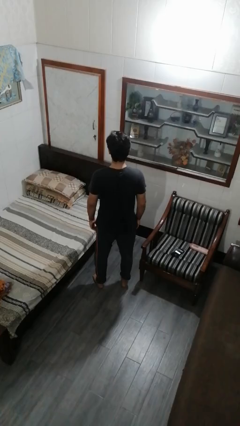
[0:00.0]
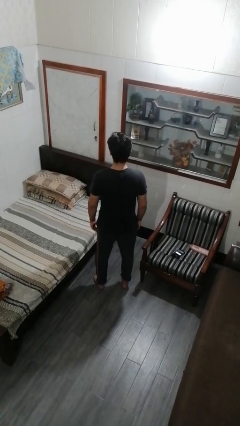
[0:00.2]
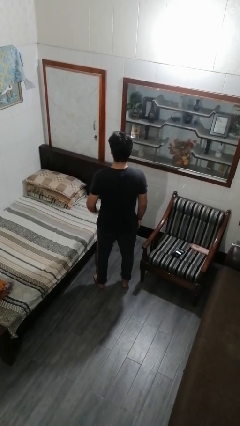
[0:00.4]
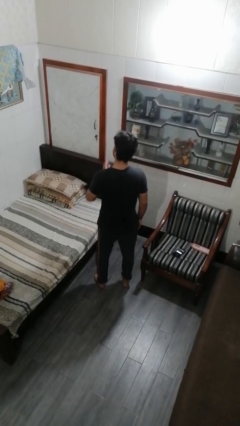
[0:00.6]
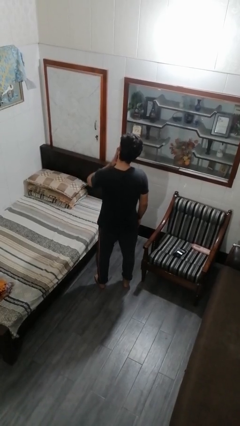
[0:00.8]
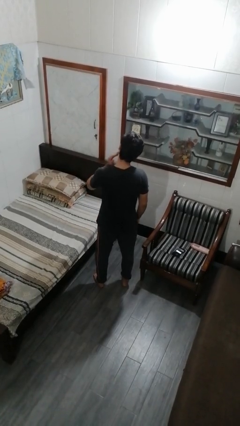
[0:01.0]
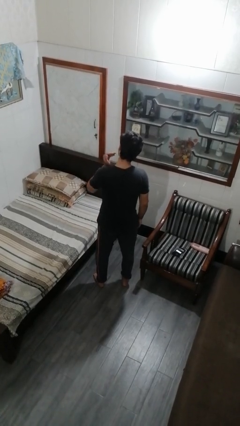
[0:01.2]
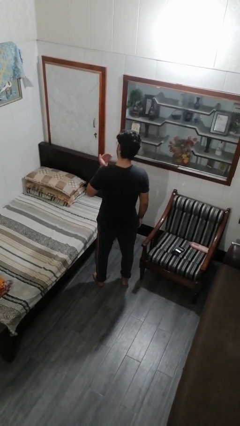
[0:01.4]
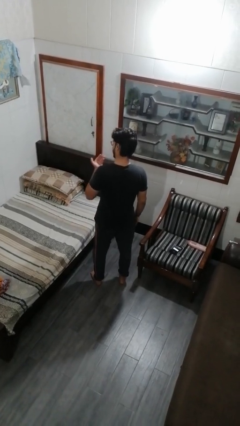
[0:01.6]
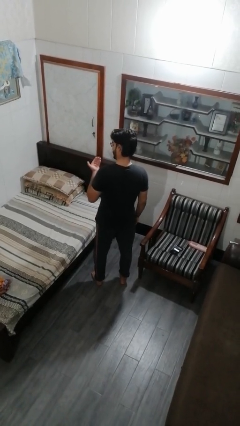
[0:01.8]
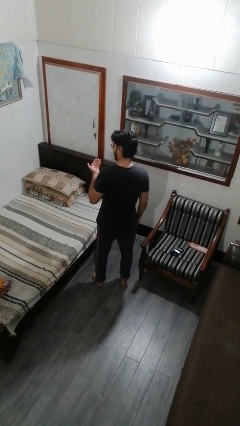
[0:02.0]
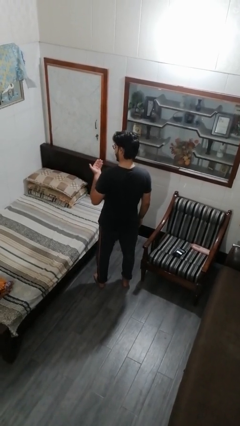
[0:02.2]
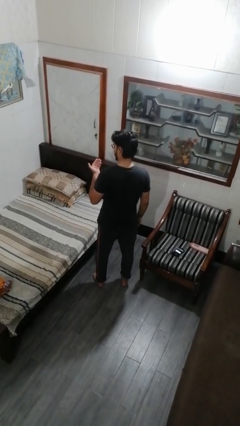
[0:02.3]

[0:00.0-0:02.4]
person swats bug

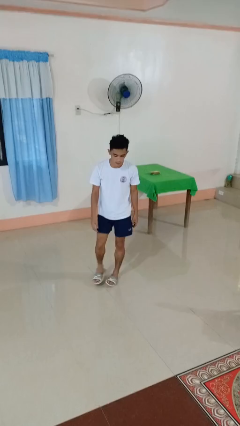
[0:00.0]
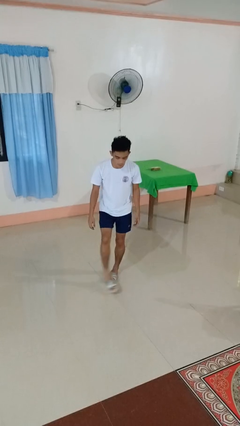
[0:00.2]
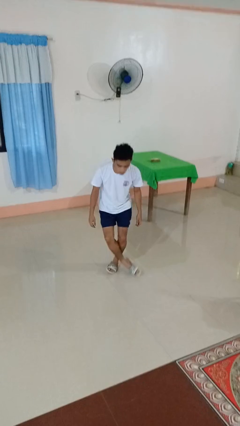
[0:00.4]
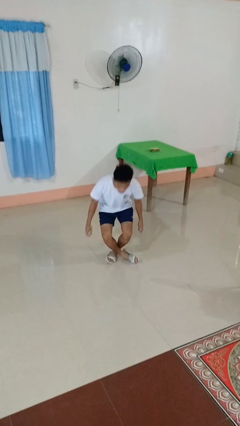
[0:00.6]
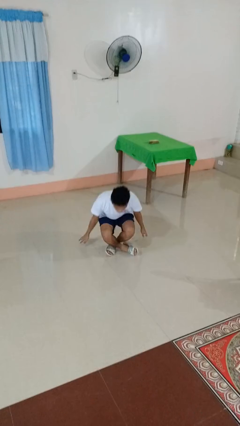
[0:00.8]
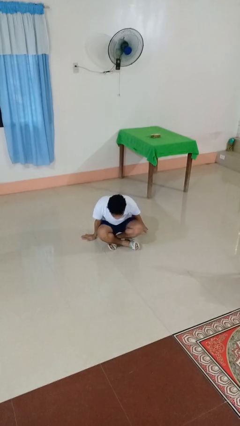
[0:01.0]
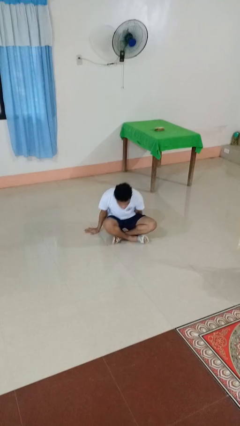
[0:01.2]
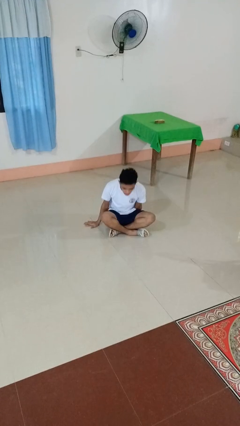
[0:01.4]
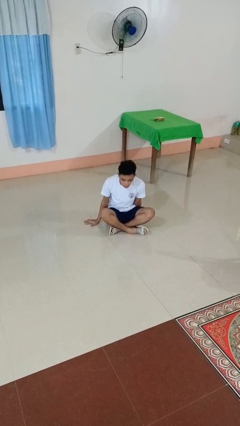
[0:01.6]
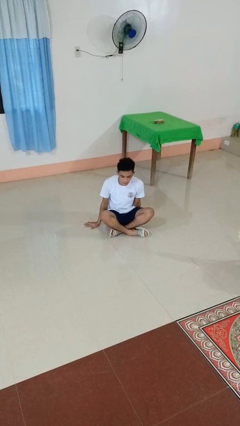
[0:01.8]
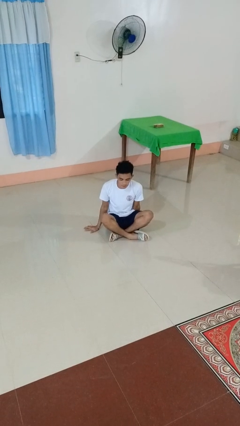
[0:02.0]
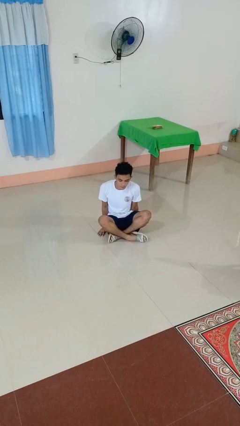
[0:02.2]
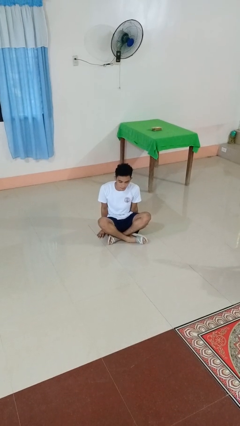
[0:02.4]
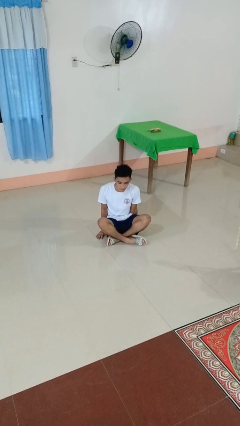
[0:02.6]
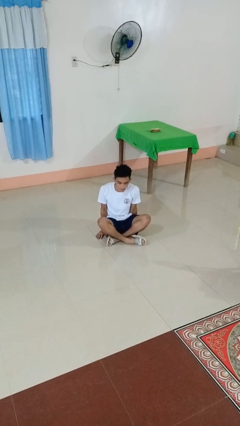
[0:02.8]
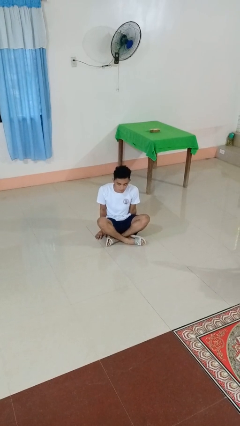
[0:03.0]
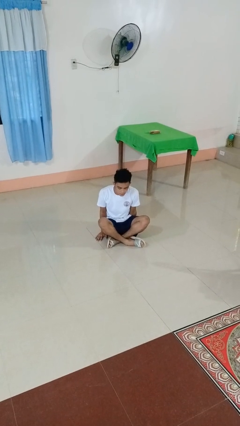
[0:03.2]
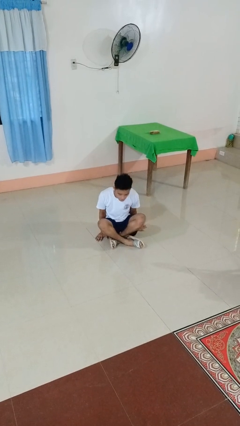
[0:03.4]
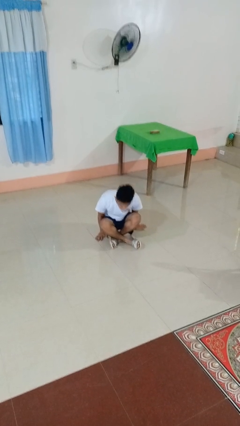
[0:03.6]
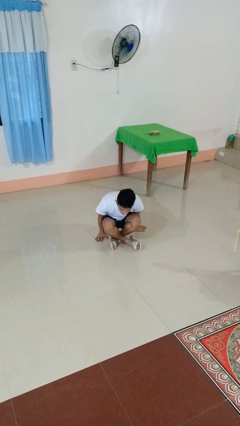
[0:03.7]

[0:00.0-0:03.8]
person sits crisscross

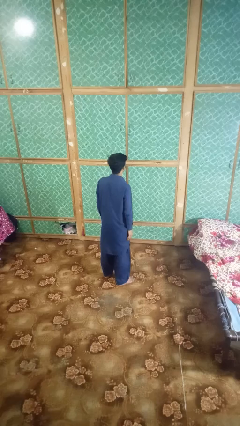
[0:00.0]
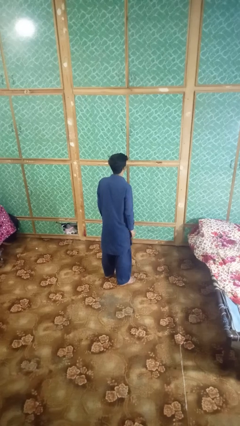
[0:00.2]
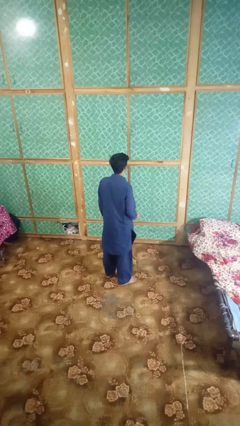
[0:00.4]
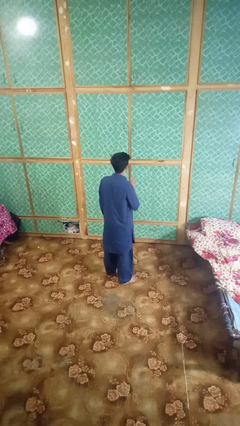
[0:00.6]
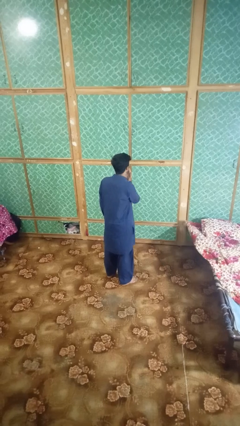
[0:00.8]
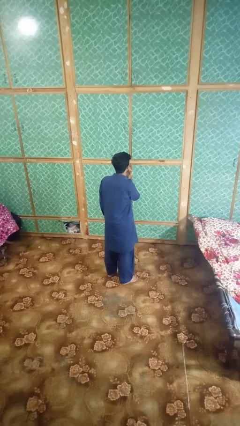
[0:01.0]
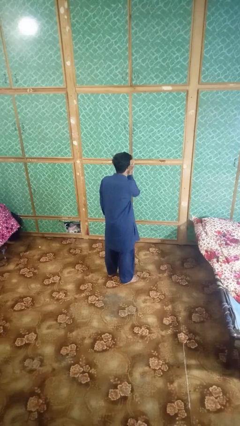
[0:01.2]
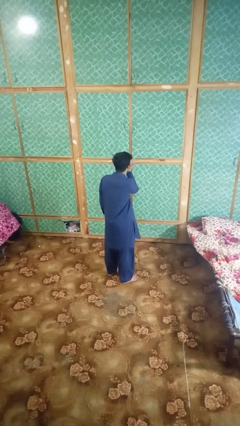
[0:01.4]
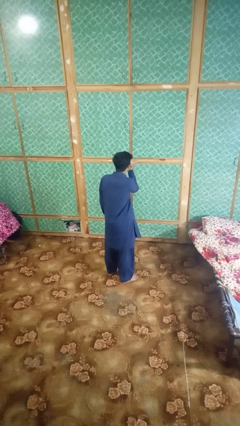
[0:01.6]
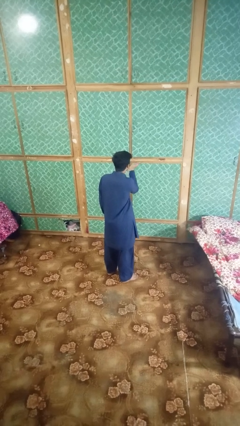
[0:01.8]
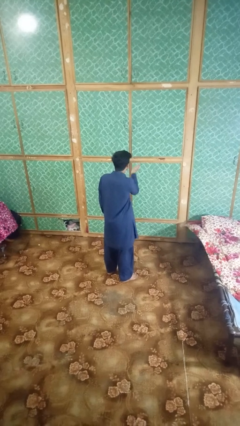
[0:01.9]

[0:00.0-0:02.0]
person gestures blow kiss

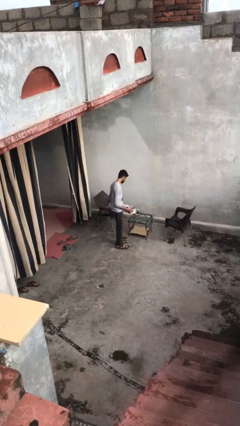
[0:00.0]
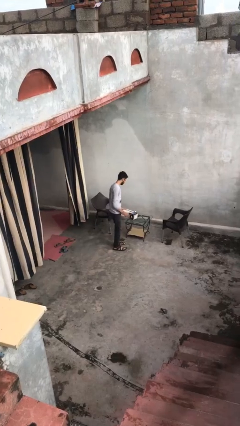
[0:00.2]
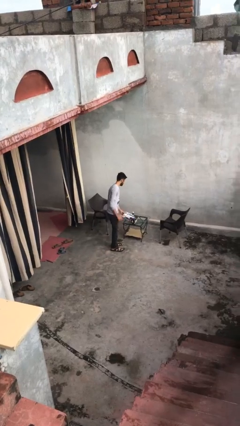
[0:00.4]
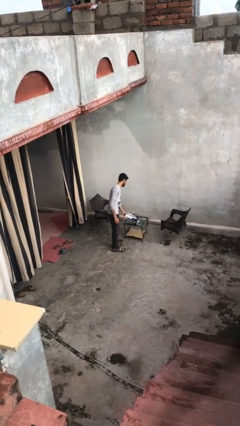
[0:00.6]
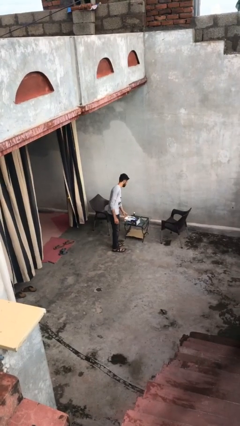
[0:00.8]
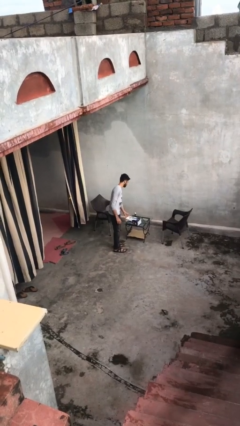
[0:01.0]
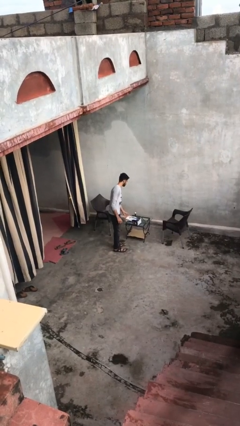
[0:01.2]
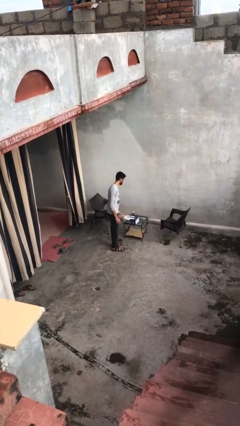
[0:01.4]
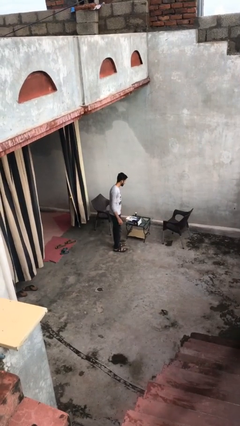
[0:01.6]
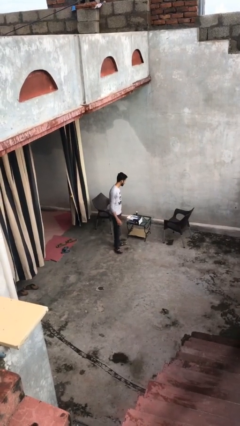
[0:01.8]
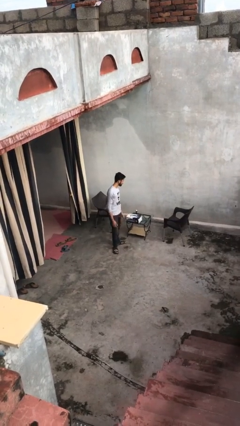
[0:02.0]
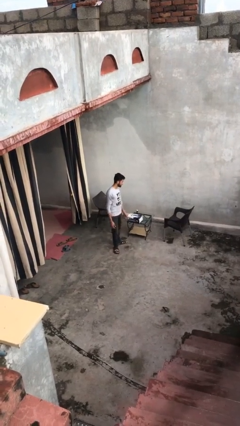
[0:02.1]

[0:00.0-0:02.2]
person puts down object on table

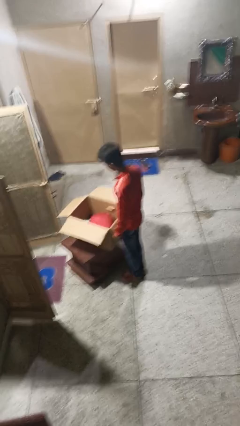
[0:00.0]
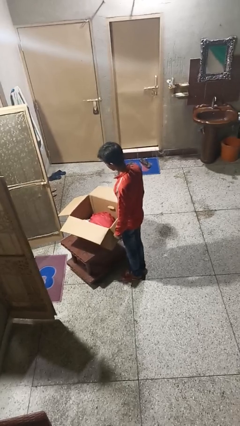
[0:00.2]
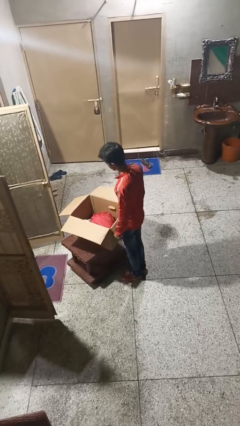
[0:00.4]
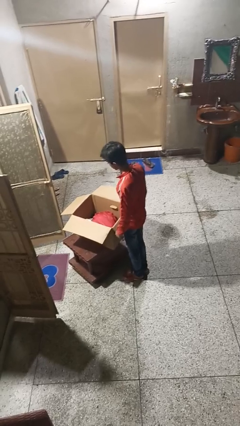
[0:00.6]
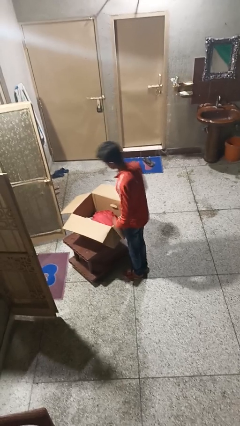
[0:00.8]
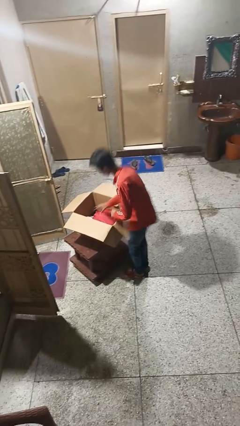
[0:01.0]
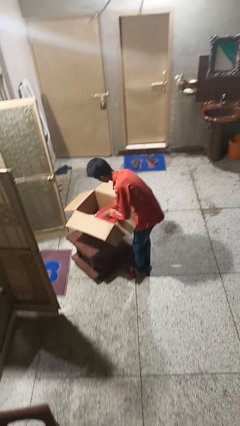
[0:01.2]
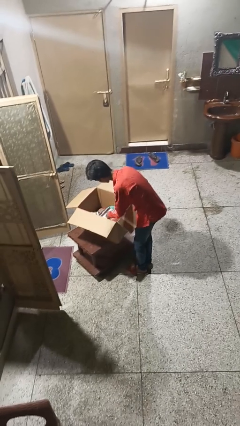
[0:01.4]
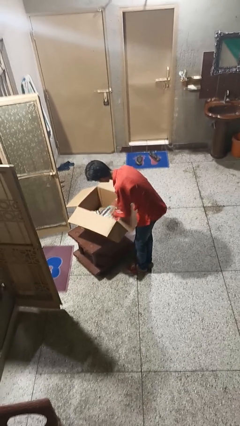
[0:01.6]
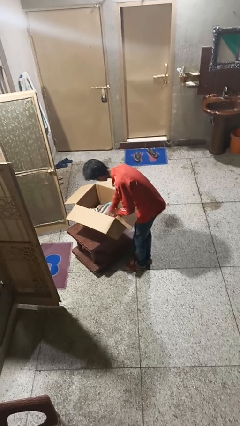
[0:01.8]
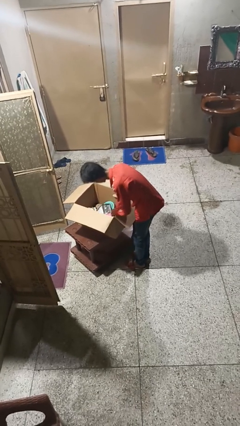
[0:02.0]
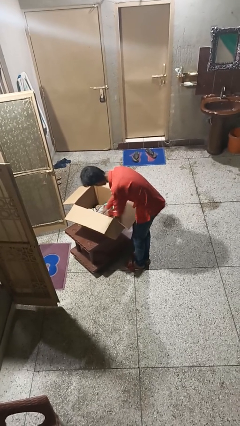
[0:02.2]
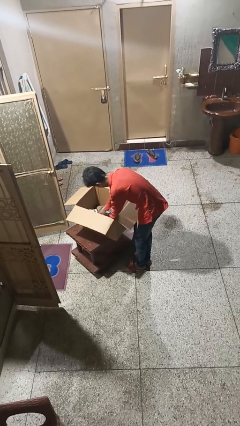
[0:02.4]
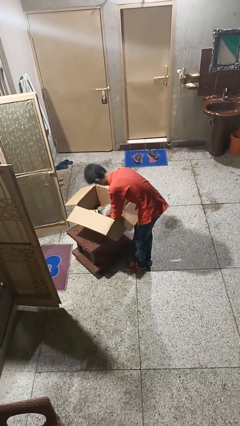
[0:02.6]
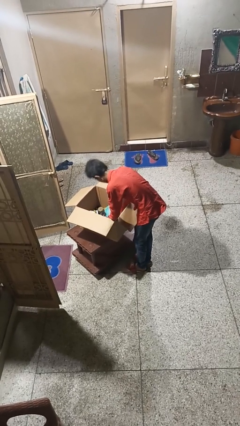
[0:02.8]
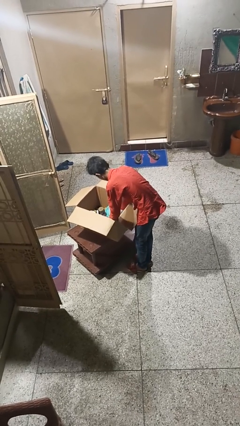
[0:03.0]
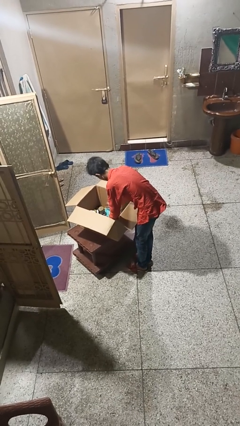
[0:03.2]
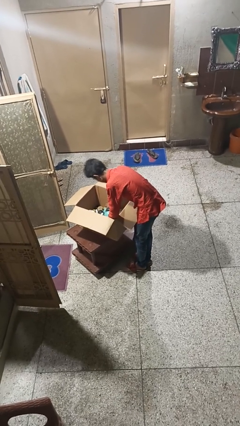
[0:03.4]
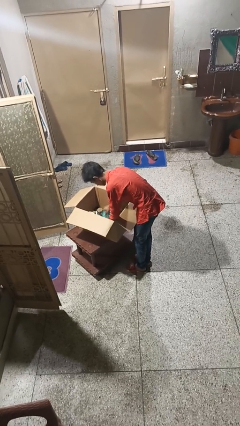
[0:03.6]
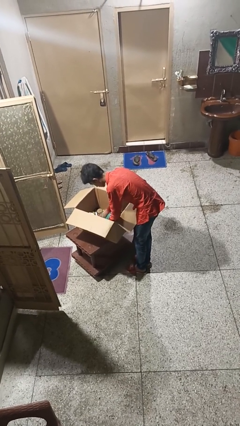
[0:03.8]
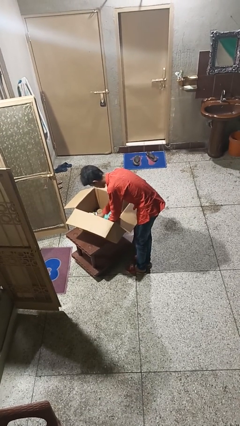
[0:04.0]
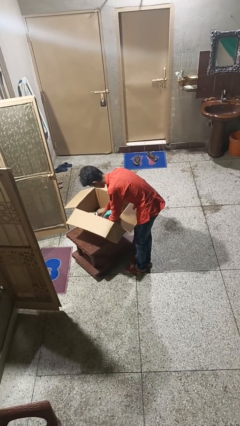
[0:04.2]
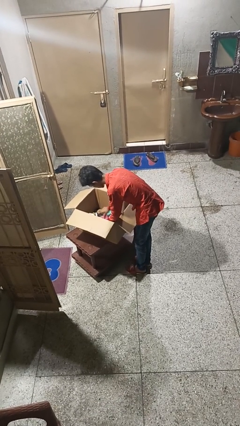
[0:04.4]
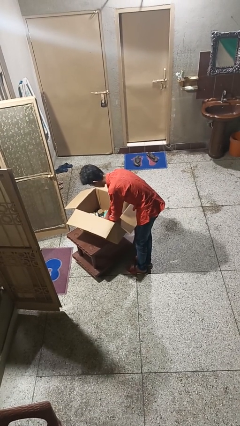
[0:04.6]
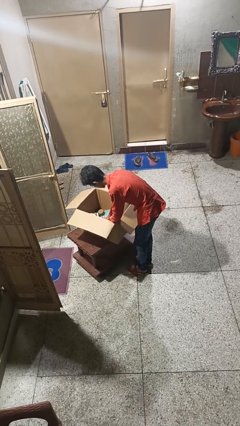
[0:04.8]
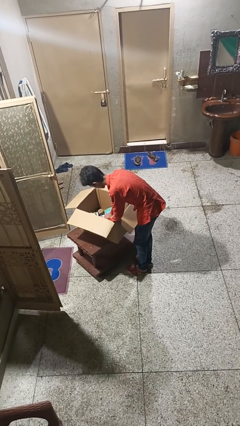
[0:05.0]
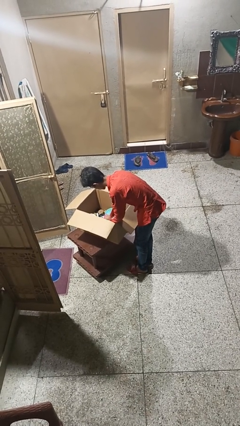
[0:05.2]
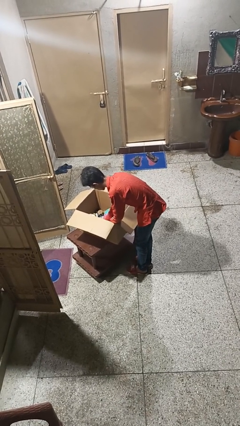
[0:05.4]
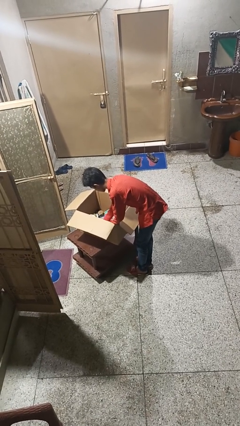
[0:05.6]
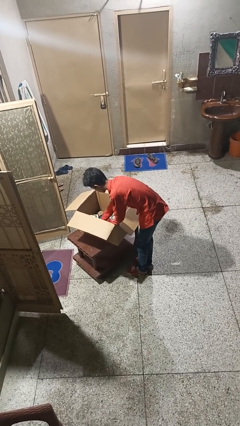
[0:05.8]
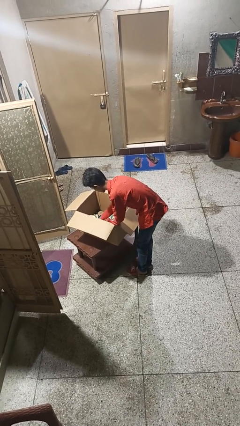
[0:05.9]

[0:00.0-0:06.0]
person searches in box
